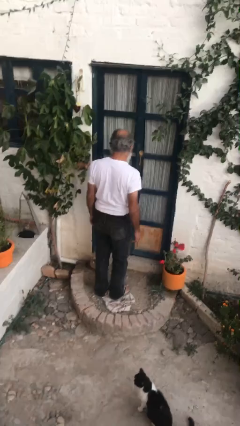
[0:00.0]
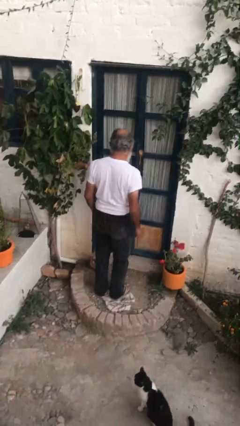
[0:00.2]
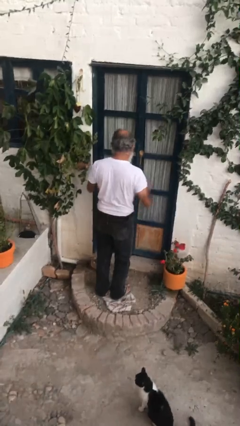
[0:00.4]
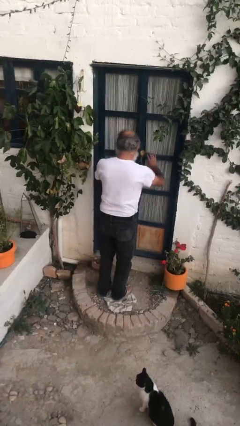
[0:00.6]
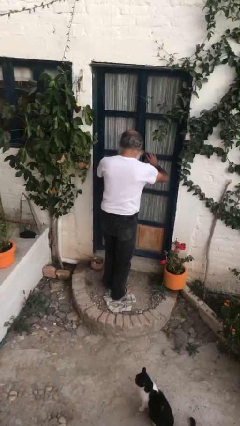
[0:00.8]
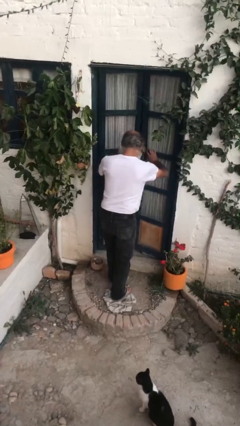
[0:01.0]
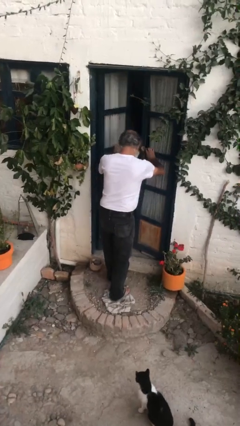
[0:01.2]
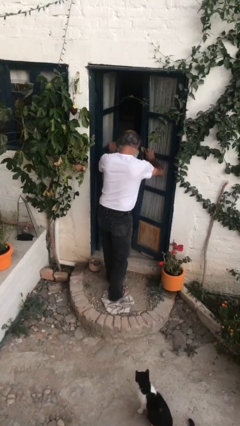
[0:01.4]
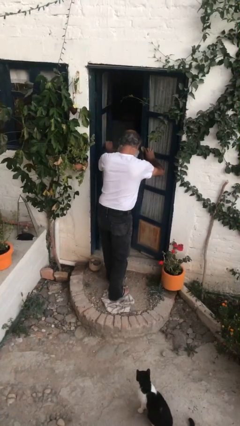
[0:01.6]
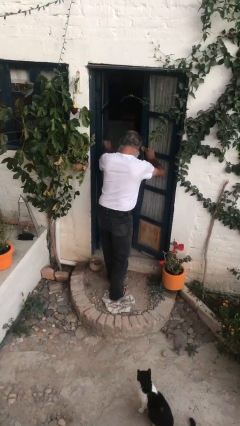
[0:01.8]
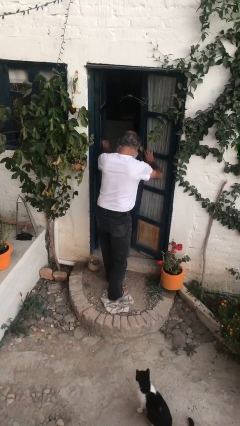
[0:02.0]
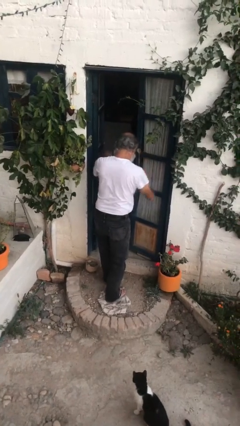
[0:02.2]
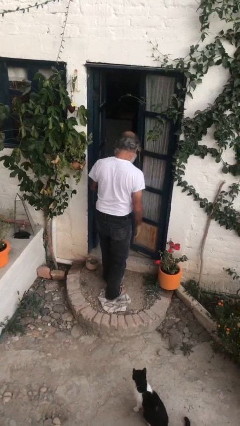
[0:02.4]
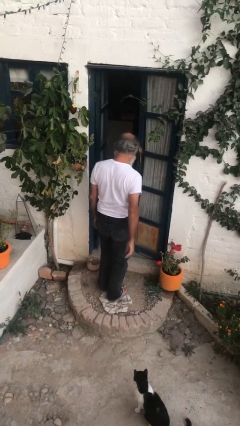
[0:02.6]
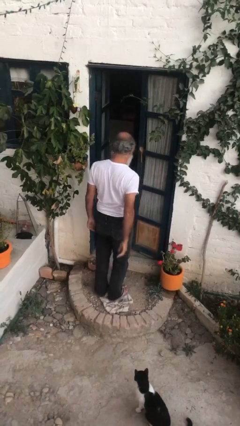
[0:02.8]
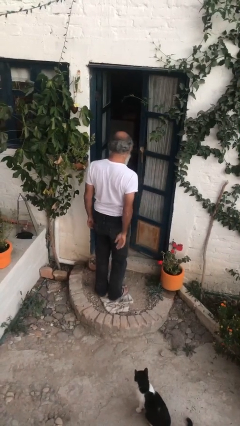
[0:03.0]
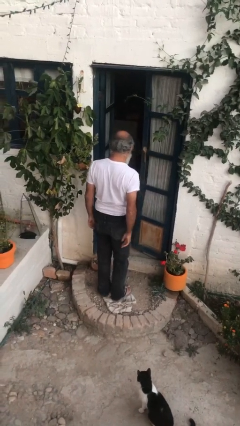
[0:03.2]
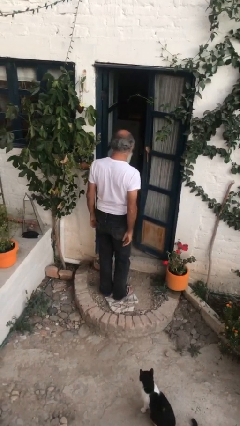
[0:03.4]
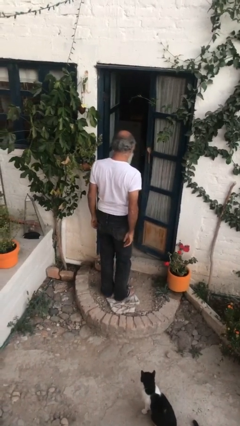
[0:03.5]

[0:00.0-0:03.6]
person opens facility door

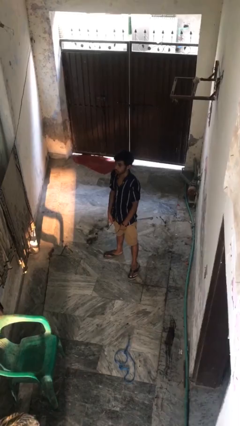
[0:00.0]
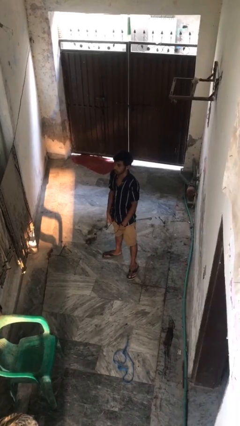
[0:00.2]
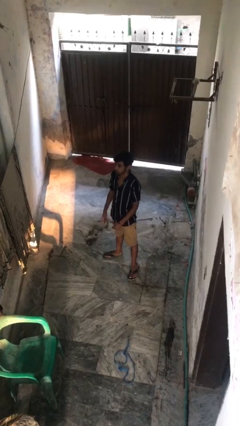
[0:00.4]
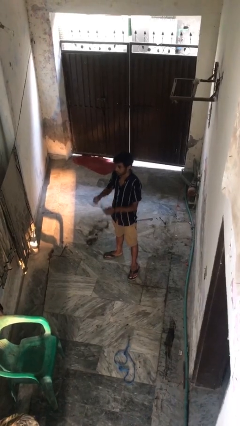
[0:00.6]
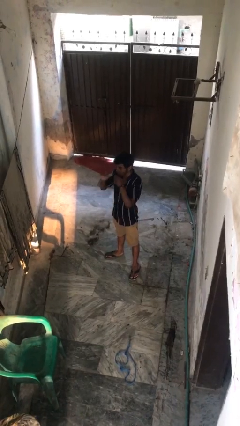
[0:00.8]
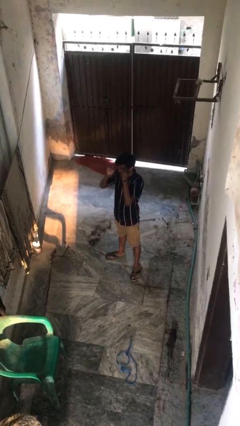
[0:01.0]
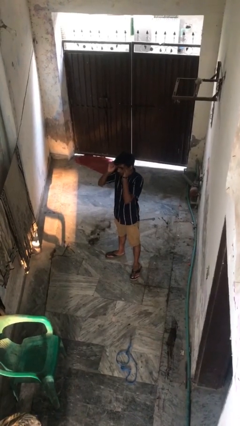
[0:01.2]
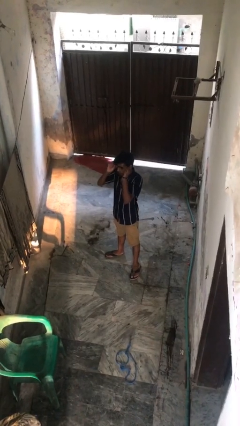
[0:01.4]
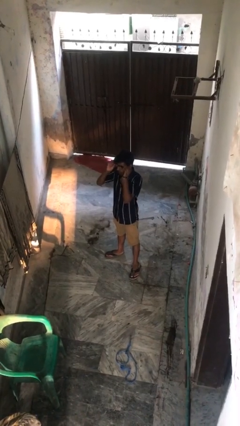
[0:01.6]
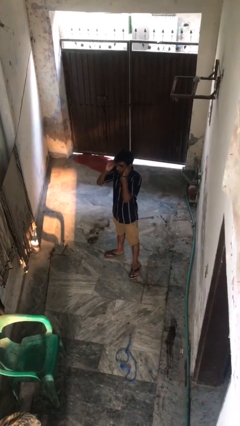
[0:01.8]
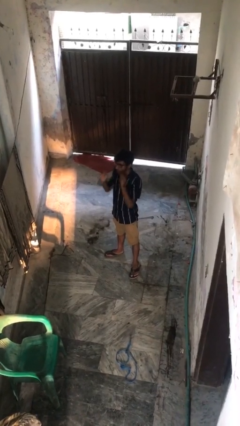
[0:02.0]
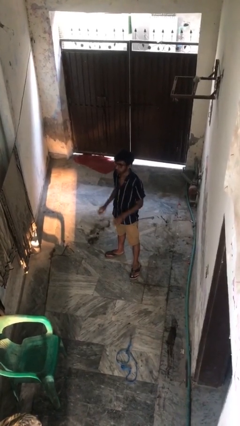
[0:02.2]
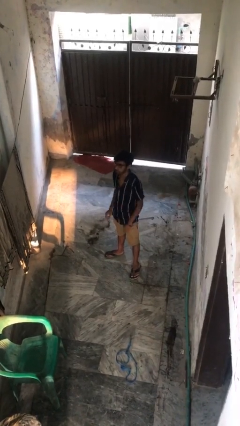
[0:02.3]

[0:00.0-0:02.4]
person puts on glasses

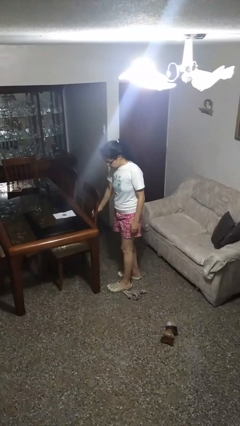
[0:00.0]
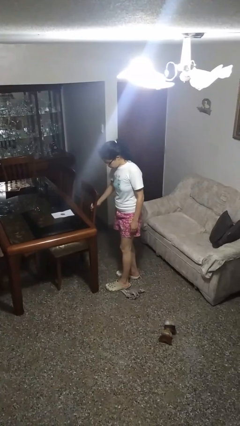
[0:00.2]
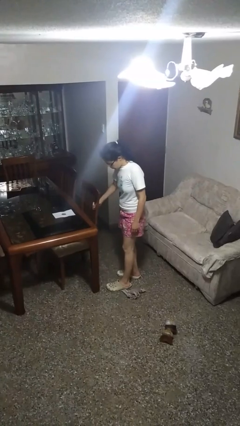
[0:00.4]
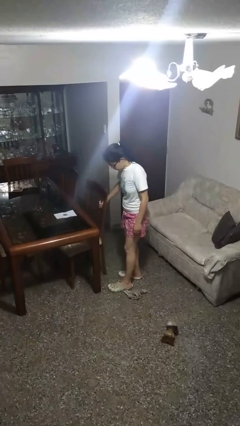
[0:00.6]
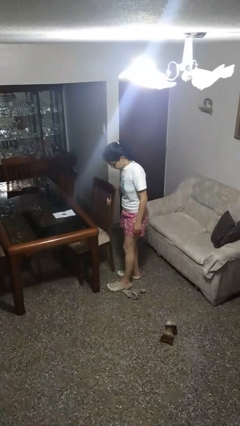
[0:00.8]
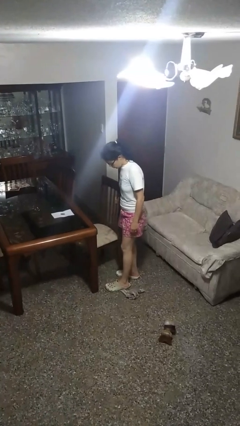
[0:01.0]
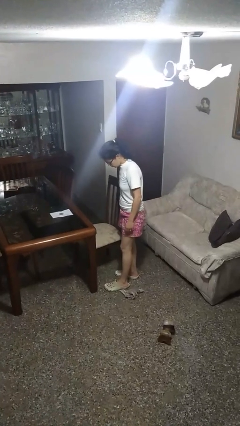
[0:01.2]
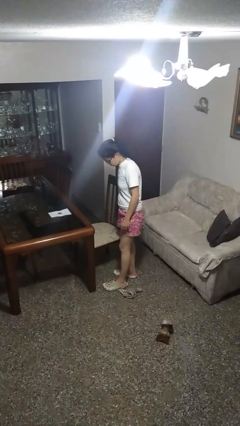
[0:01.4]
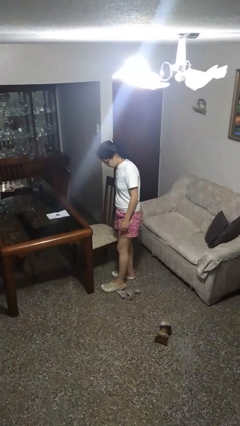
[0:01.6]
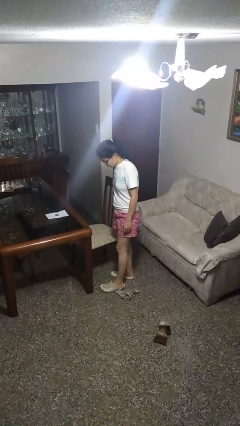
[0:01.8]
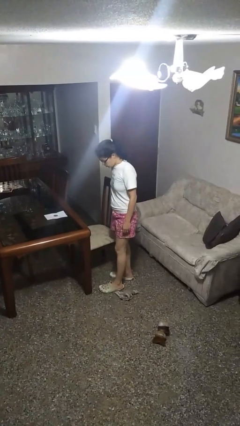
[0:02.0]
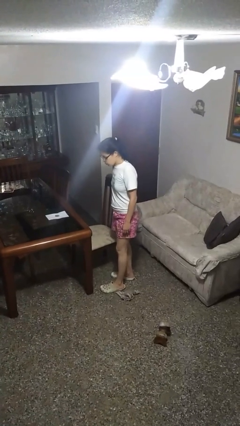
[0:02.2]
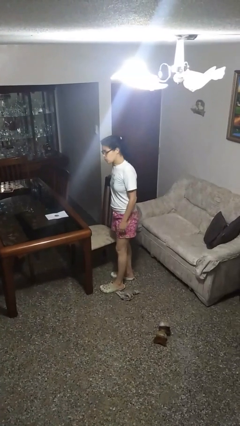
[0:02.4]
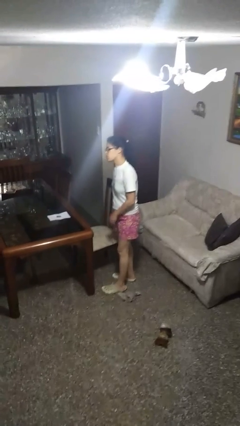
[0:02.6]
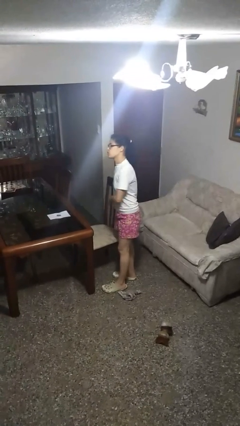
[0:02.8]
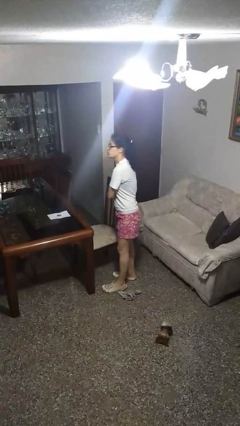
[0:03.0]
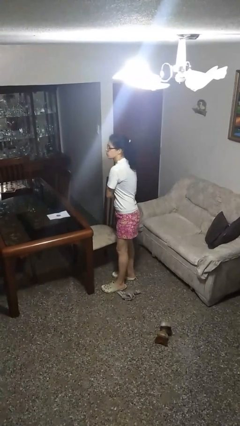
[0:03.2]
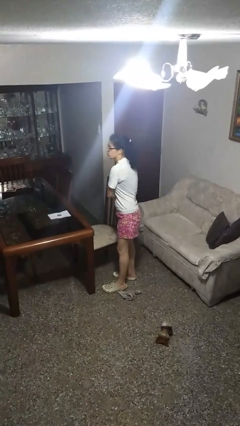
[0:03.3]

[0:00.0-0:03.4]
person pulls out chair

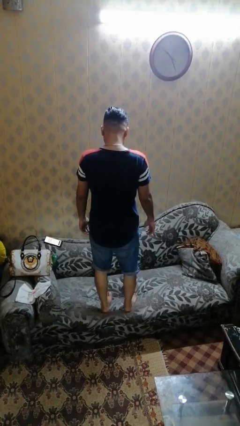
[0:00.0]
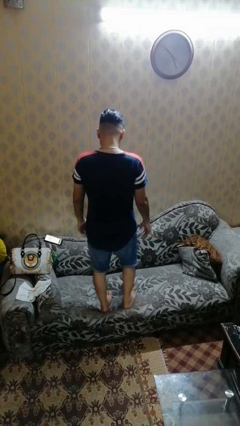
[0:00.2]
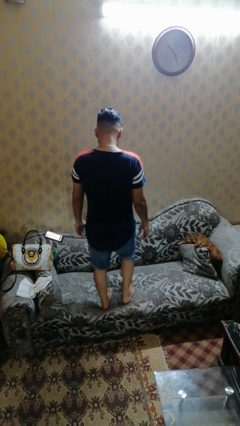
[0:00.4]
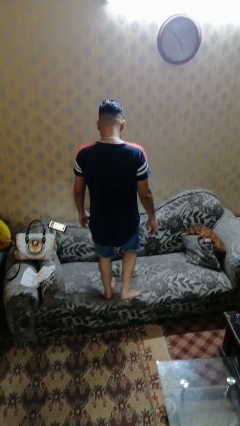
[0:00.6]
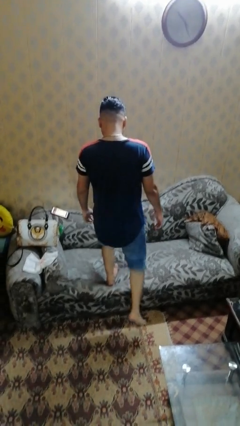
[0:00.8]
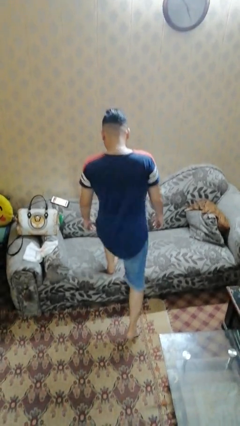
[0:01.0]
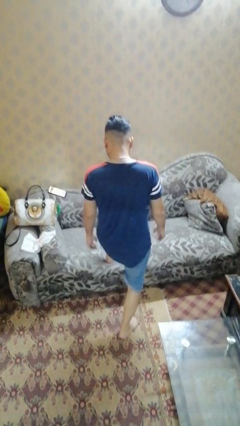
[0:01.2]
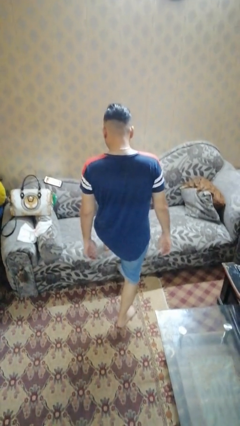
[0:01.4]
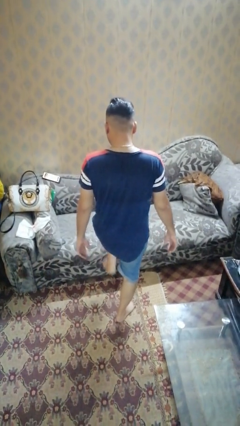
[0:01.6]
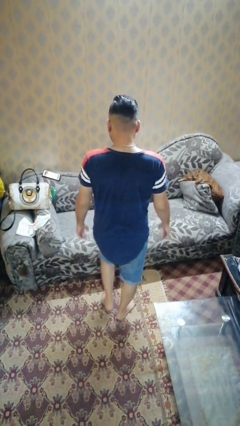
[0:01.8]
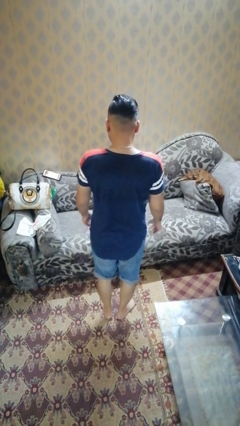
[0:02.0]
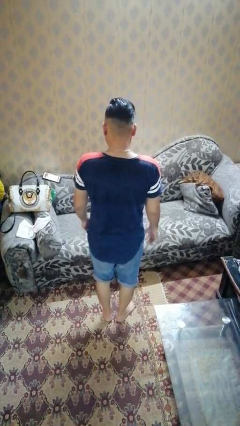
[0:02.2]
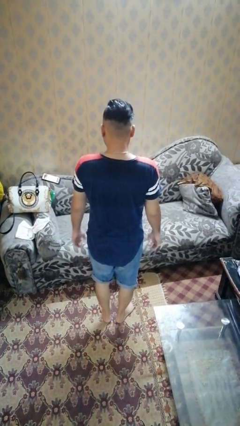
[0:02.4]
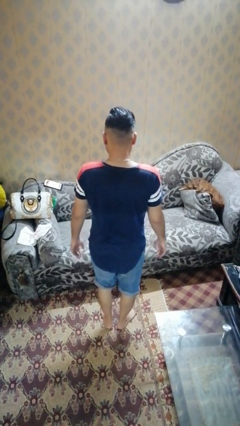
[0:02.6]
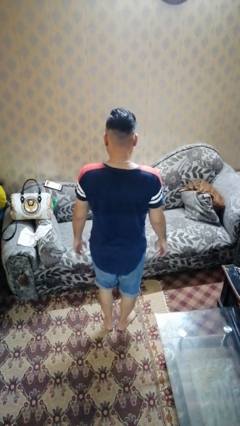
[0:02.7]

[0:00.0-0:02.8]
person climbs off couch

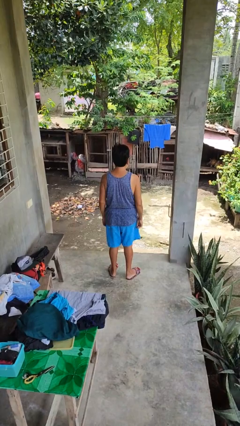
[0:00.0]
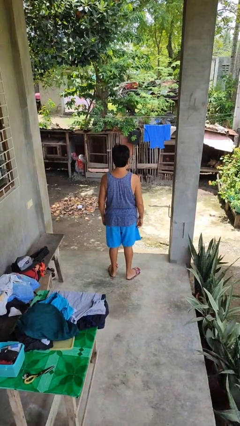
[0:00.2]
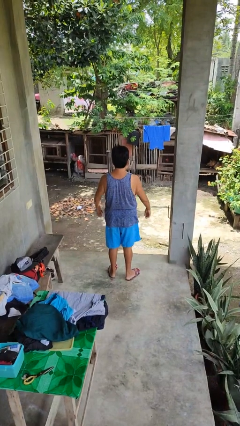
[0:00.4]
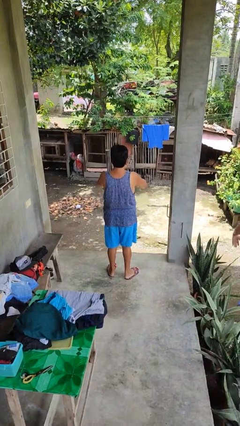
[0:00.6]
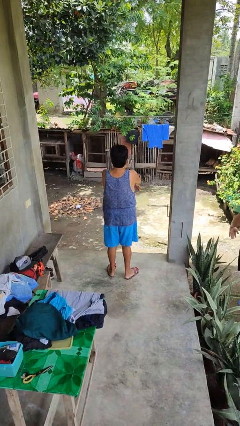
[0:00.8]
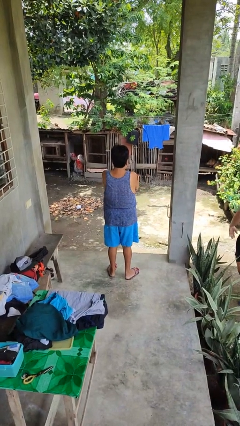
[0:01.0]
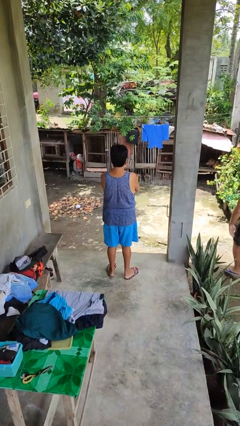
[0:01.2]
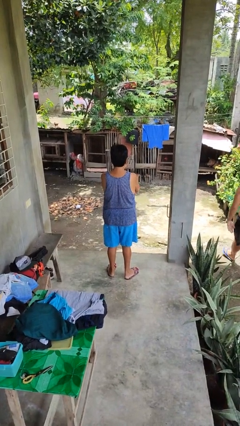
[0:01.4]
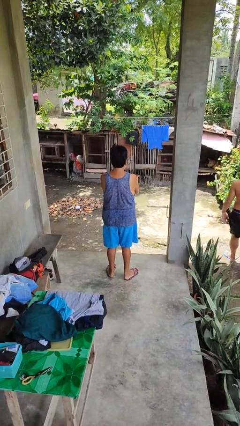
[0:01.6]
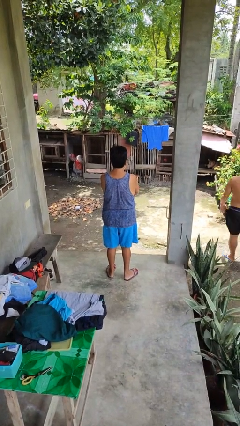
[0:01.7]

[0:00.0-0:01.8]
person crosses arms

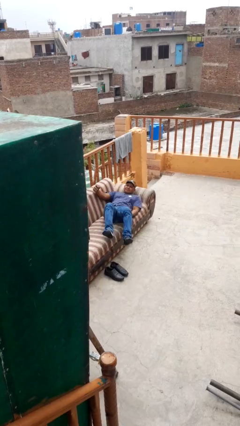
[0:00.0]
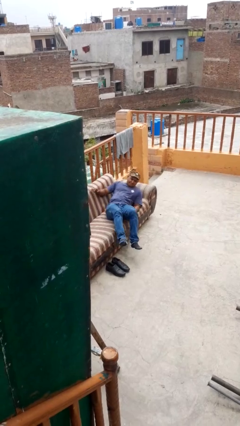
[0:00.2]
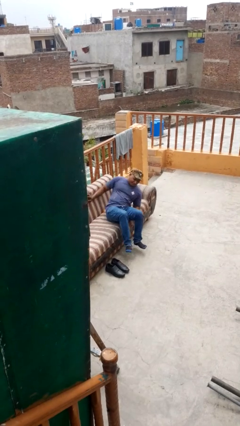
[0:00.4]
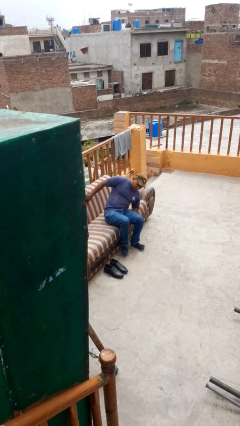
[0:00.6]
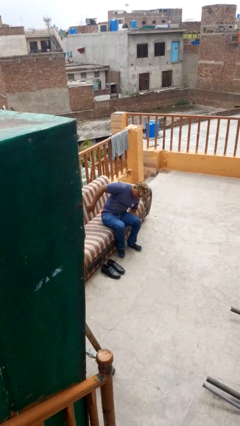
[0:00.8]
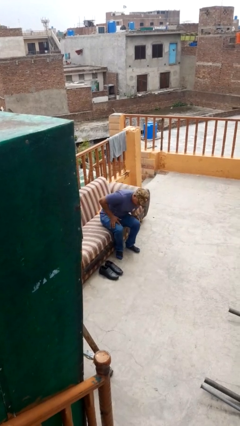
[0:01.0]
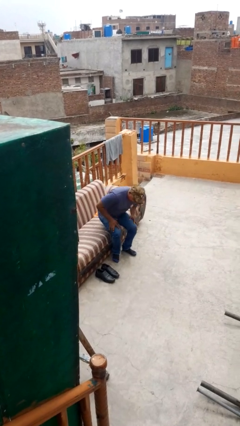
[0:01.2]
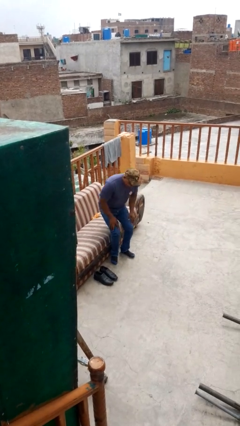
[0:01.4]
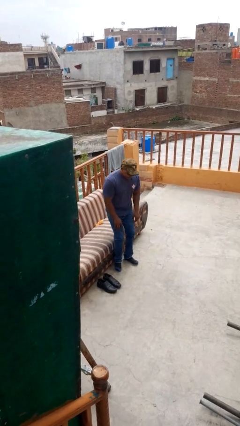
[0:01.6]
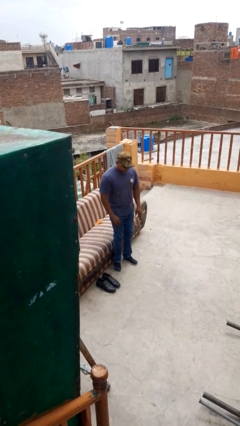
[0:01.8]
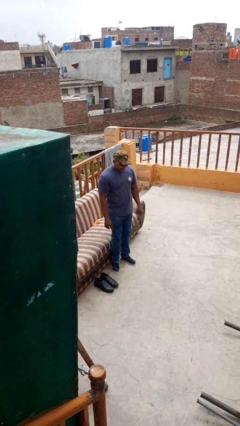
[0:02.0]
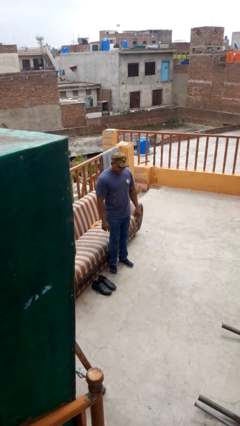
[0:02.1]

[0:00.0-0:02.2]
person stands up

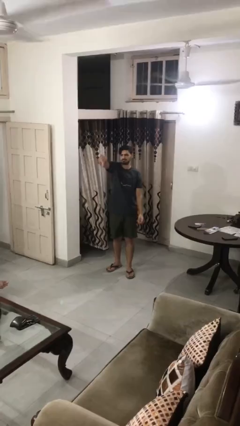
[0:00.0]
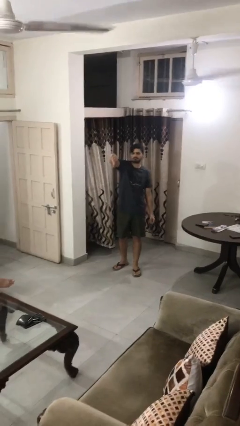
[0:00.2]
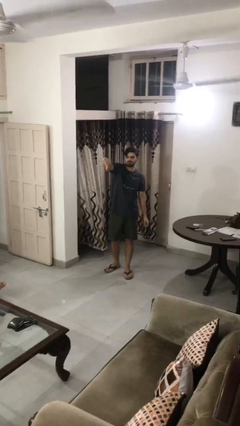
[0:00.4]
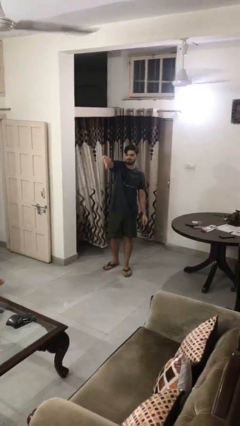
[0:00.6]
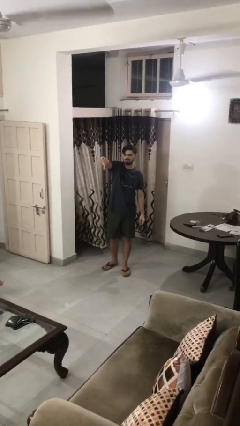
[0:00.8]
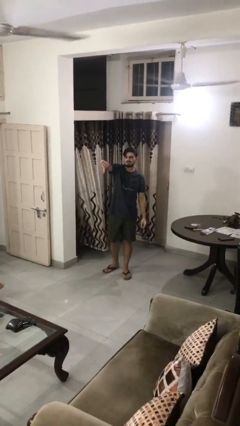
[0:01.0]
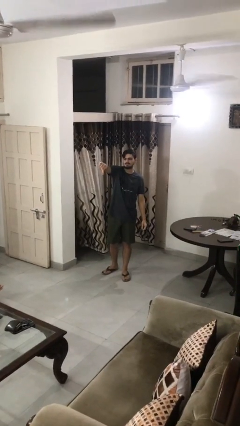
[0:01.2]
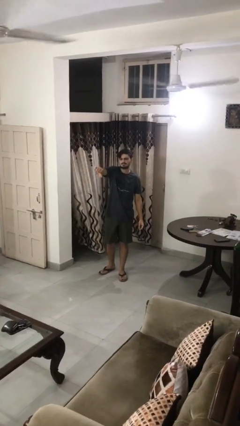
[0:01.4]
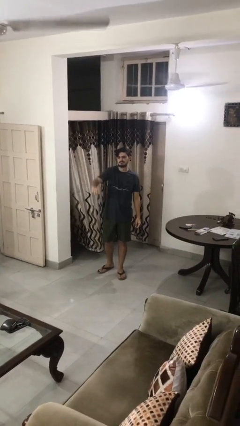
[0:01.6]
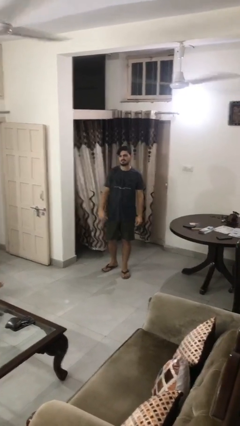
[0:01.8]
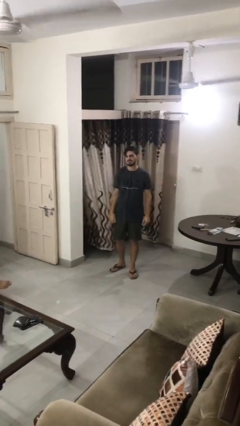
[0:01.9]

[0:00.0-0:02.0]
person gestures thumbs down
